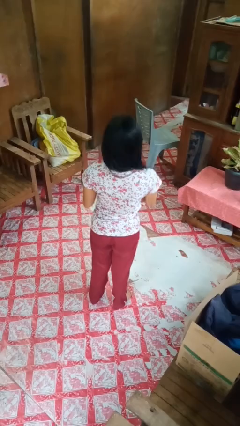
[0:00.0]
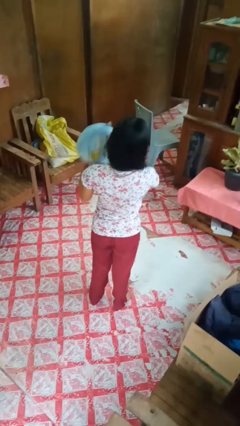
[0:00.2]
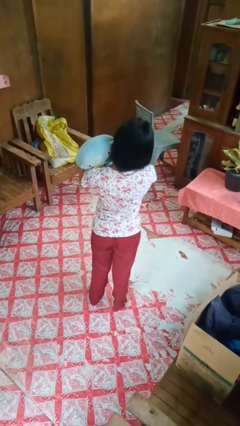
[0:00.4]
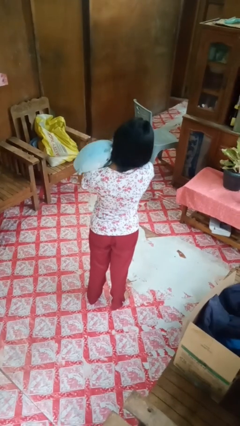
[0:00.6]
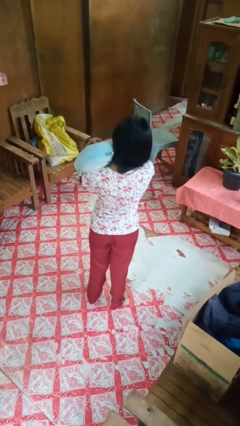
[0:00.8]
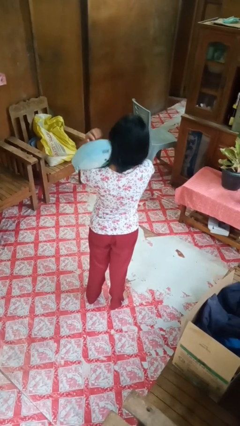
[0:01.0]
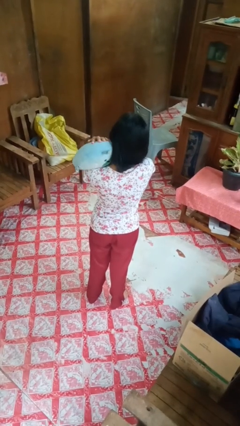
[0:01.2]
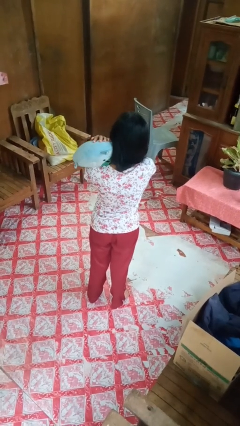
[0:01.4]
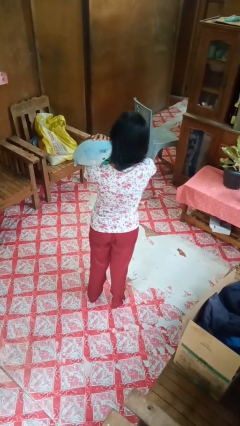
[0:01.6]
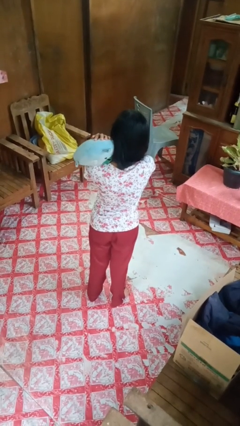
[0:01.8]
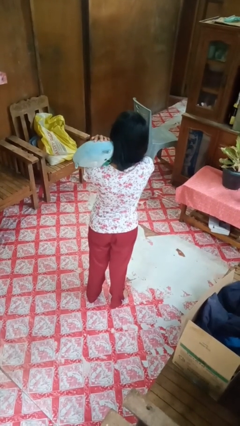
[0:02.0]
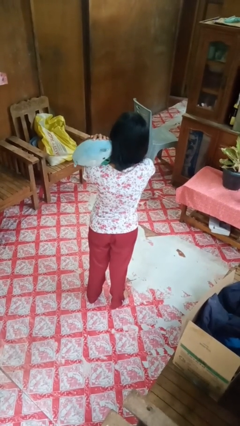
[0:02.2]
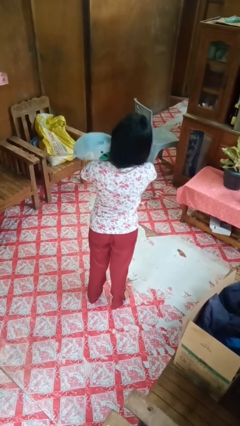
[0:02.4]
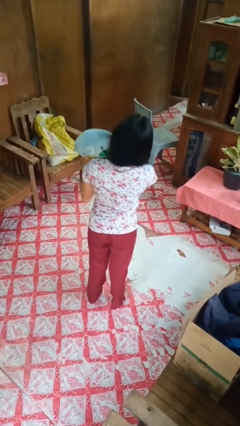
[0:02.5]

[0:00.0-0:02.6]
person hugs stuffed animal

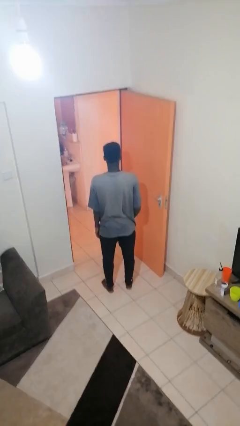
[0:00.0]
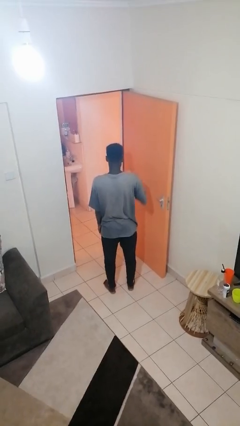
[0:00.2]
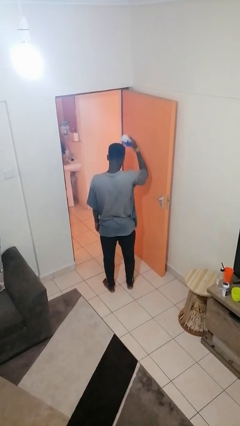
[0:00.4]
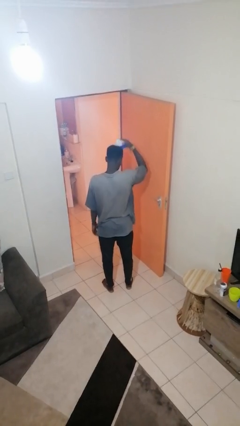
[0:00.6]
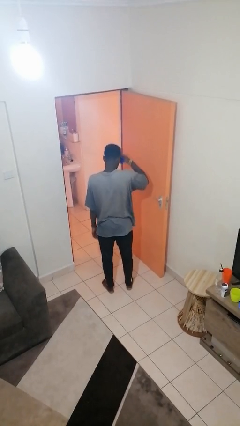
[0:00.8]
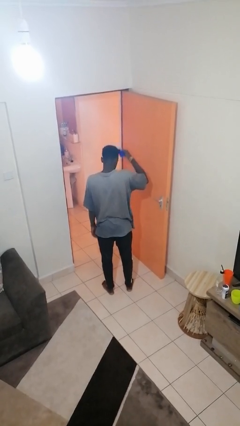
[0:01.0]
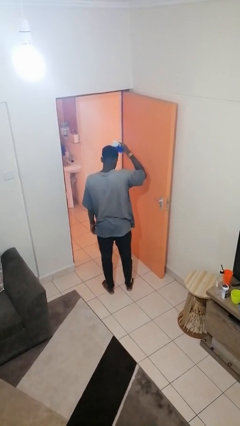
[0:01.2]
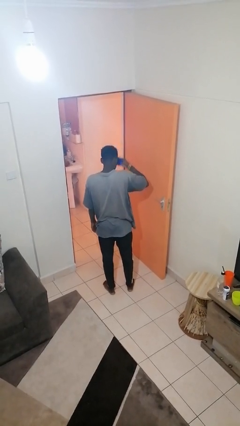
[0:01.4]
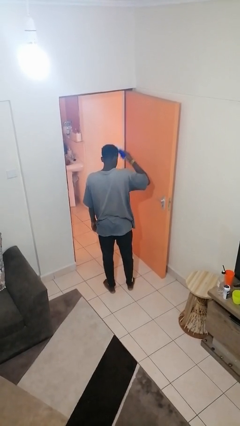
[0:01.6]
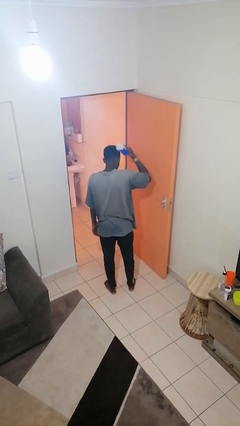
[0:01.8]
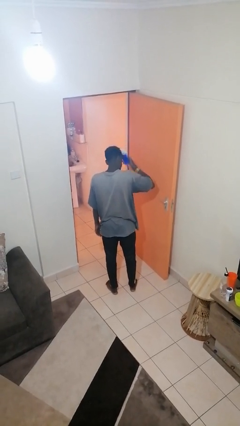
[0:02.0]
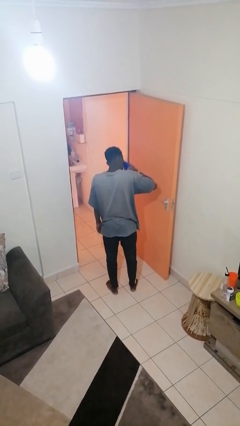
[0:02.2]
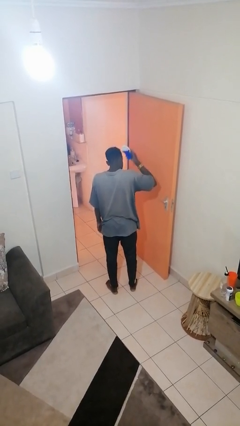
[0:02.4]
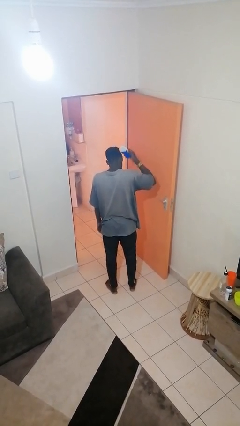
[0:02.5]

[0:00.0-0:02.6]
person brushes hair

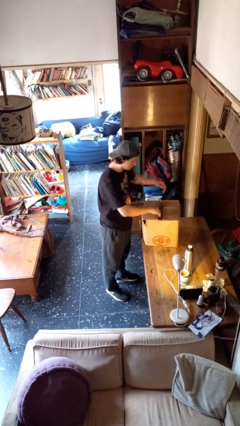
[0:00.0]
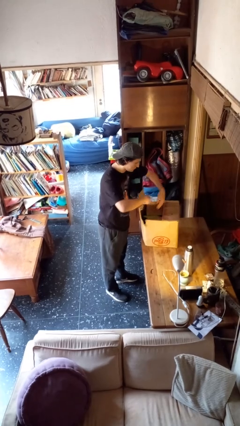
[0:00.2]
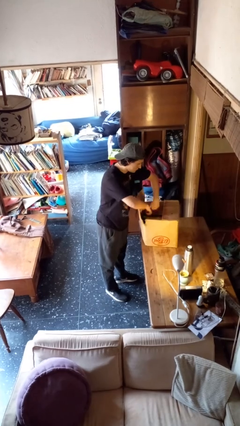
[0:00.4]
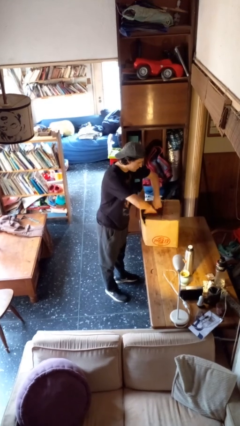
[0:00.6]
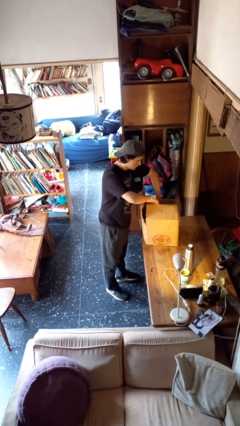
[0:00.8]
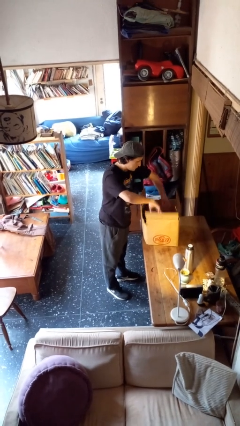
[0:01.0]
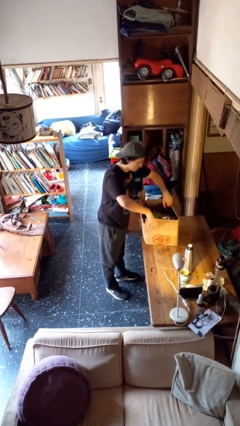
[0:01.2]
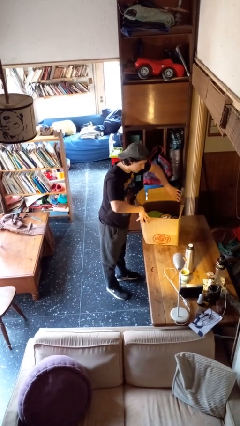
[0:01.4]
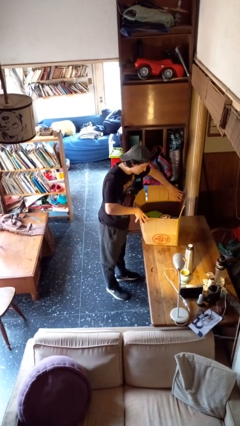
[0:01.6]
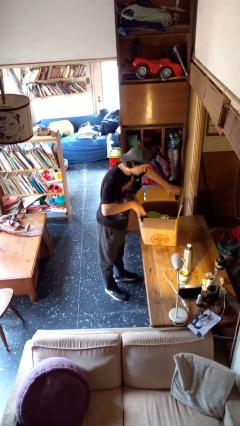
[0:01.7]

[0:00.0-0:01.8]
person opens box

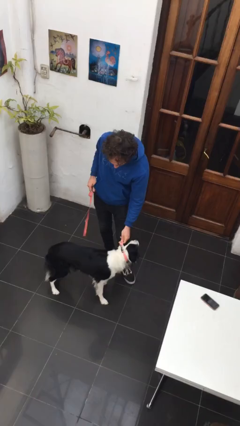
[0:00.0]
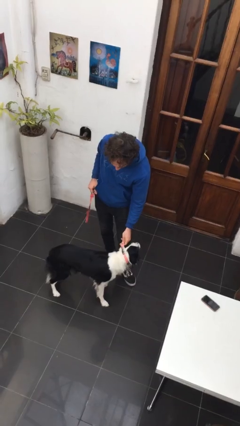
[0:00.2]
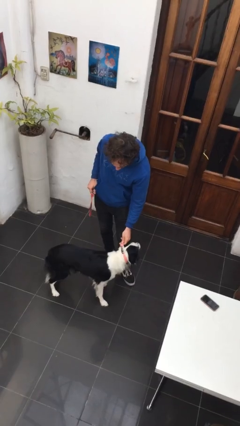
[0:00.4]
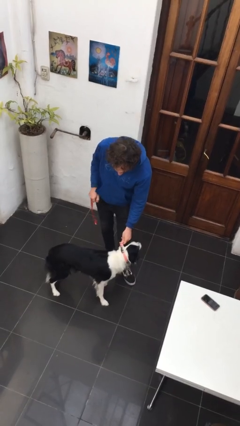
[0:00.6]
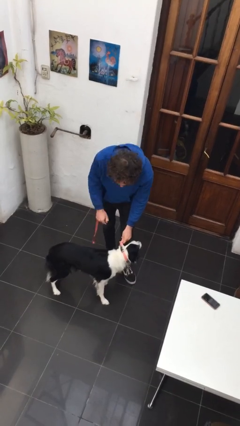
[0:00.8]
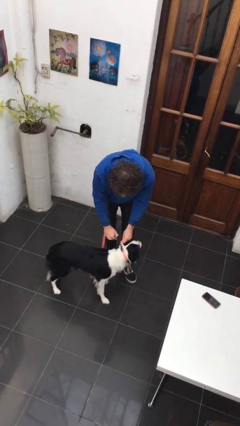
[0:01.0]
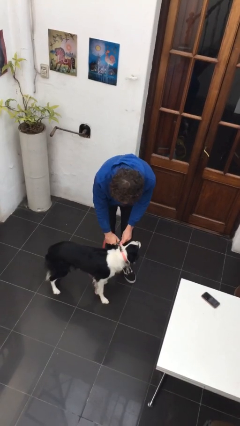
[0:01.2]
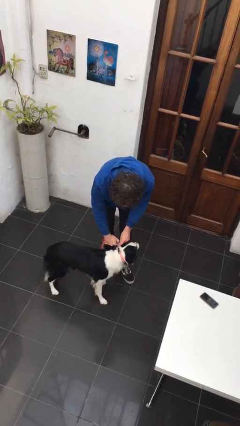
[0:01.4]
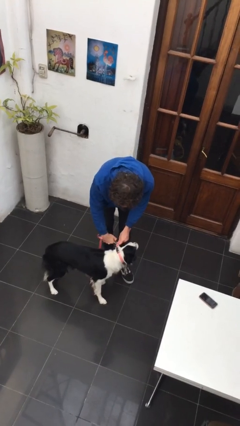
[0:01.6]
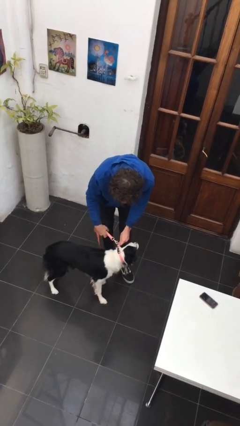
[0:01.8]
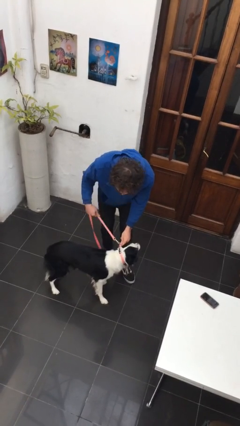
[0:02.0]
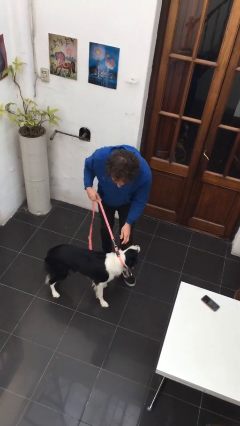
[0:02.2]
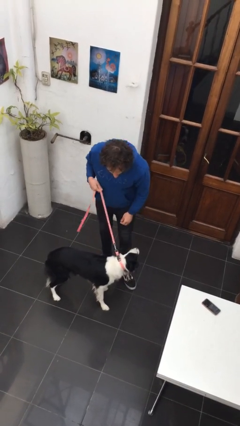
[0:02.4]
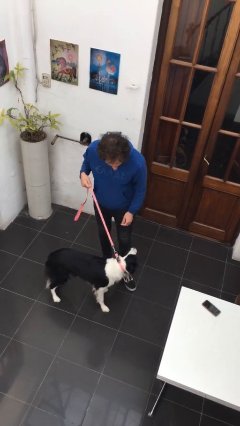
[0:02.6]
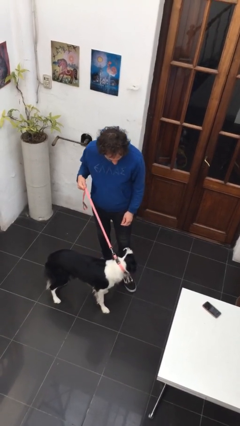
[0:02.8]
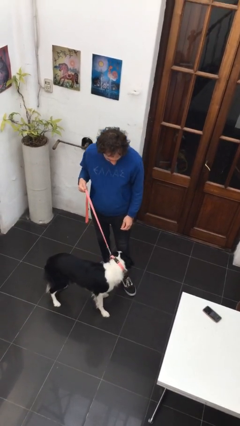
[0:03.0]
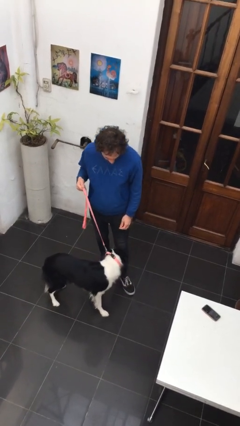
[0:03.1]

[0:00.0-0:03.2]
person attaches leash to dog

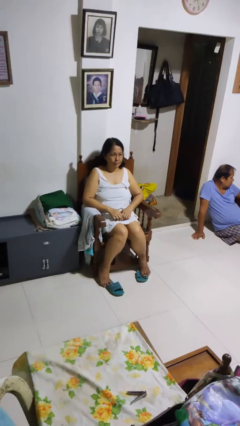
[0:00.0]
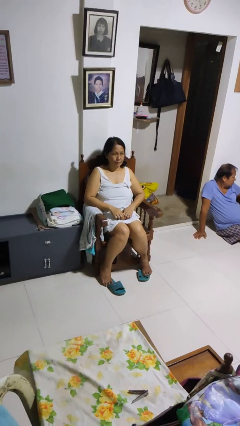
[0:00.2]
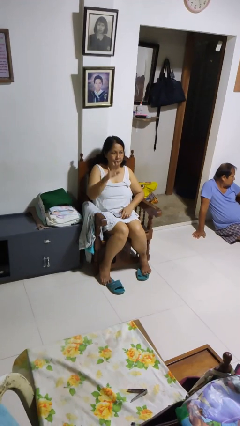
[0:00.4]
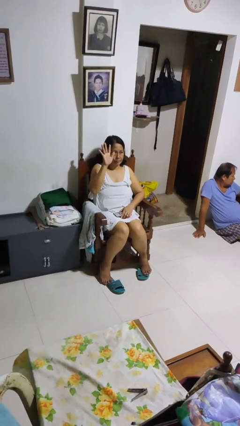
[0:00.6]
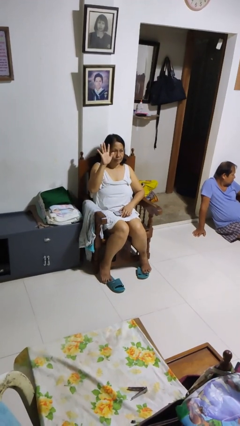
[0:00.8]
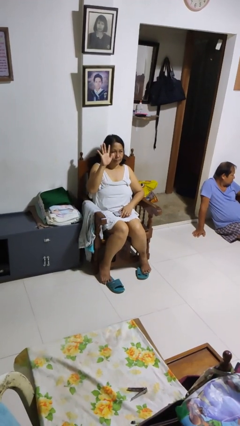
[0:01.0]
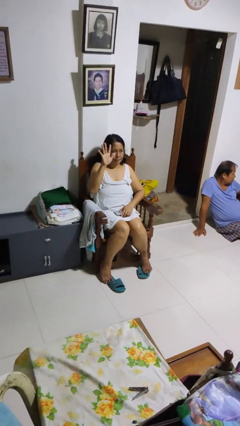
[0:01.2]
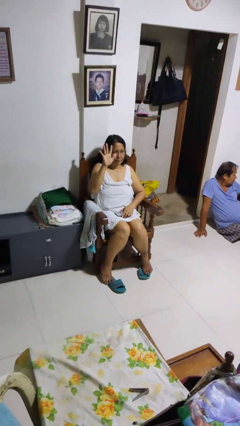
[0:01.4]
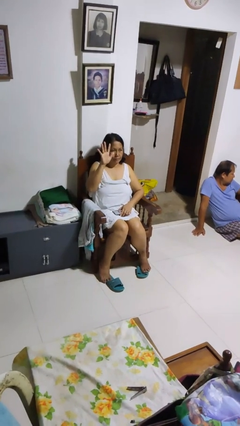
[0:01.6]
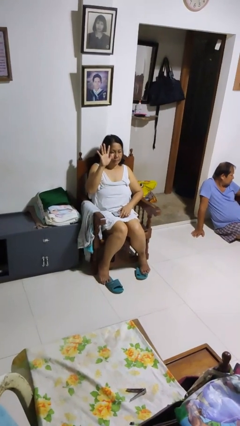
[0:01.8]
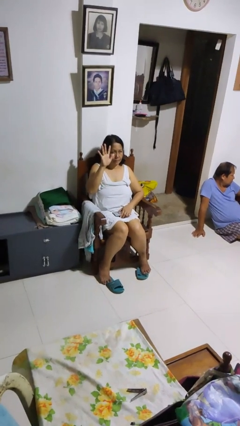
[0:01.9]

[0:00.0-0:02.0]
person gestures number five

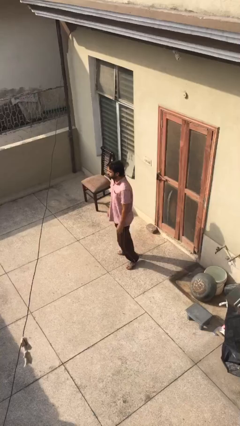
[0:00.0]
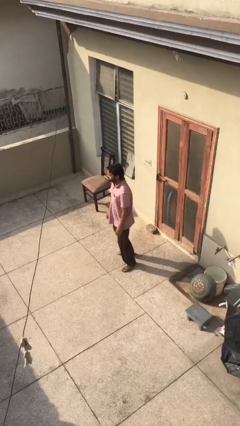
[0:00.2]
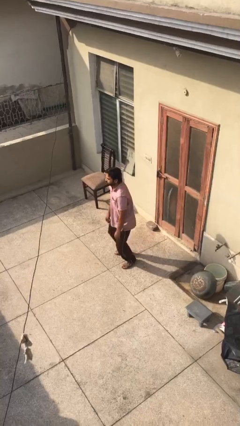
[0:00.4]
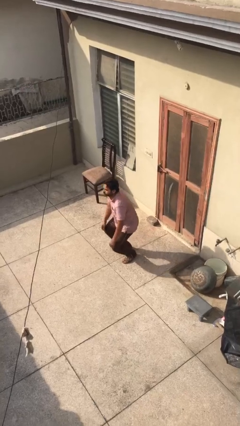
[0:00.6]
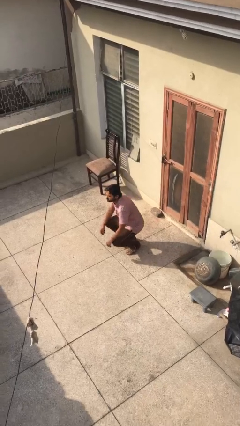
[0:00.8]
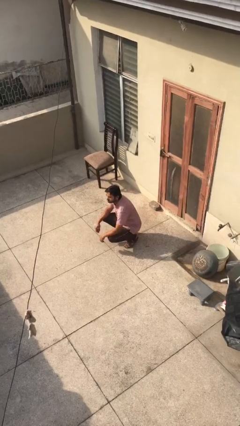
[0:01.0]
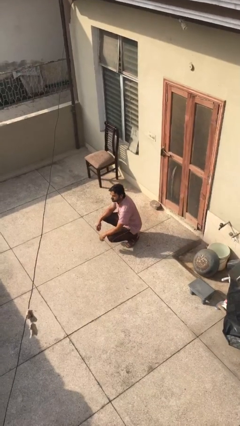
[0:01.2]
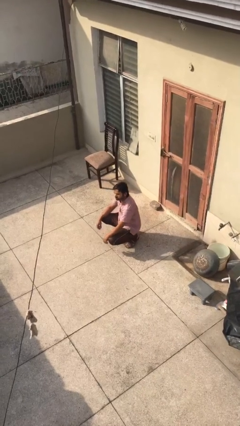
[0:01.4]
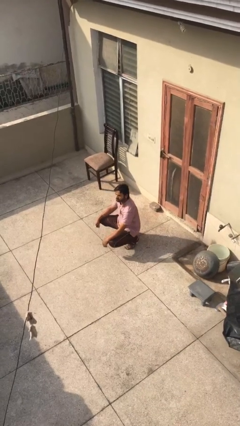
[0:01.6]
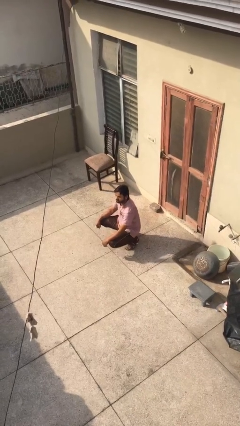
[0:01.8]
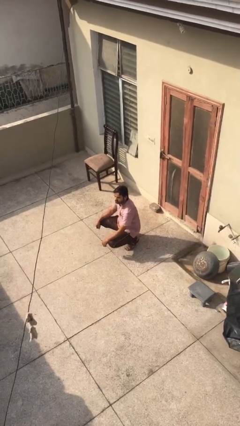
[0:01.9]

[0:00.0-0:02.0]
person sits down

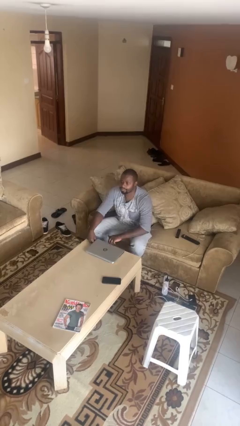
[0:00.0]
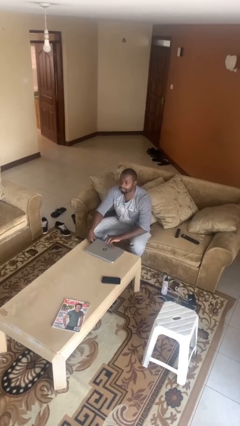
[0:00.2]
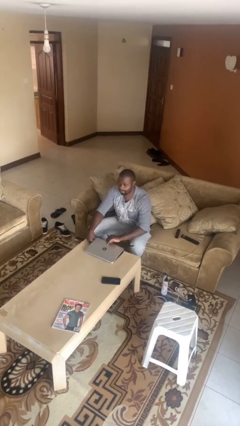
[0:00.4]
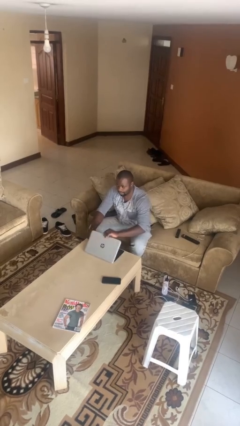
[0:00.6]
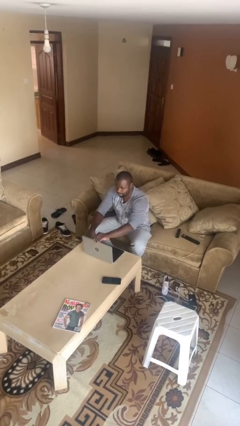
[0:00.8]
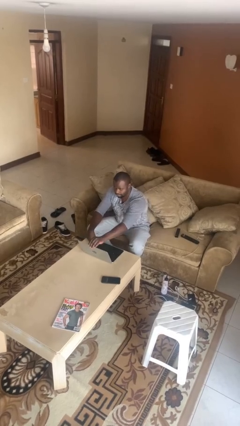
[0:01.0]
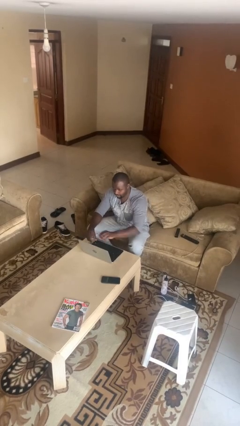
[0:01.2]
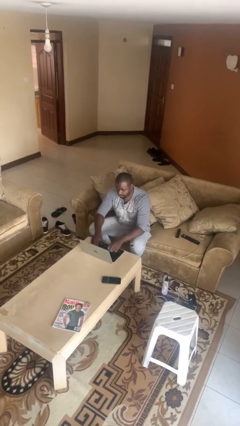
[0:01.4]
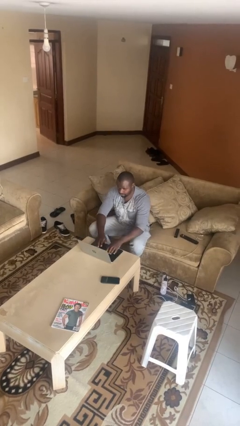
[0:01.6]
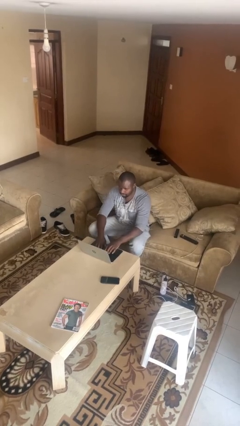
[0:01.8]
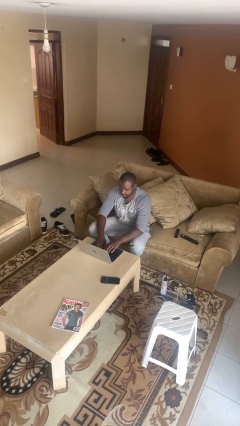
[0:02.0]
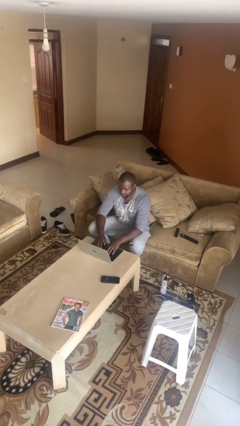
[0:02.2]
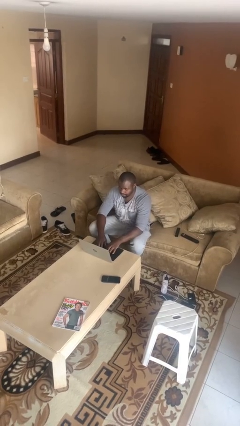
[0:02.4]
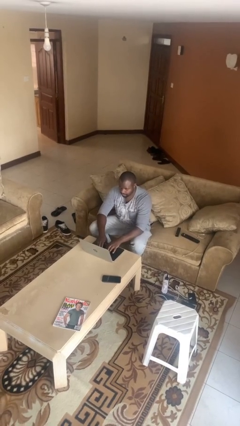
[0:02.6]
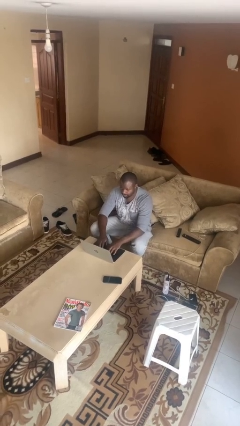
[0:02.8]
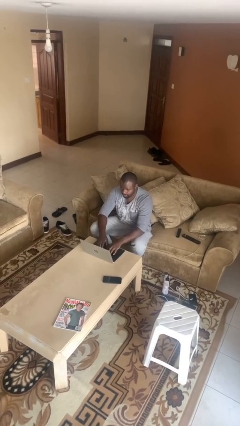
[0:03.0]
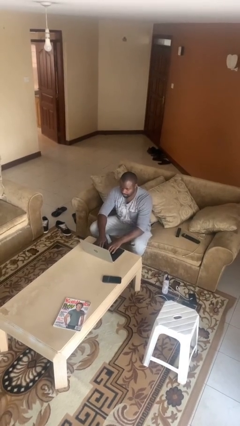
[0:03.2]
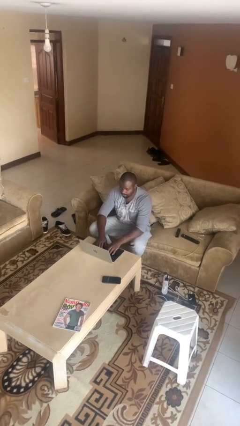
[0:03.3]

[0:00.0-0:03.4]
person interacts with laptop
